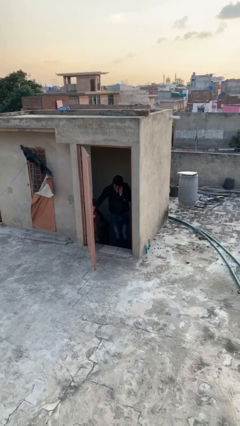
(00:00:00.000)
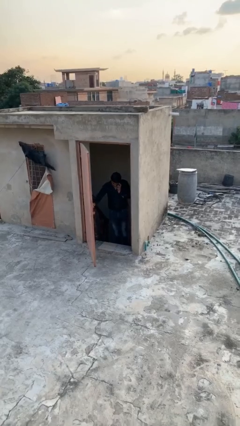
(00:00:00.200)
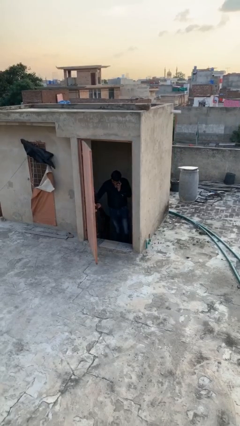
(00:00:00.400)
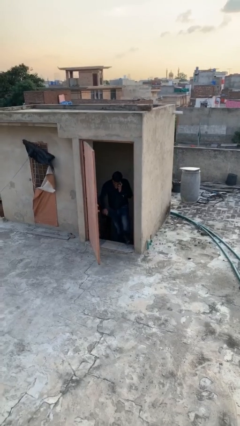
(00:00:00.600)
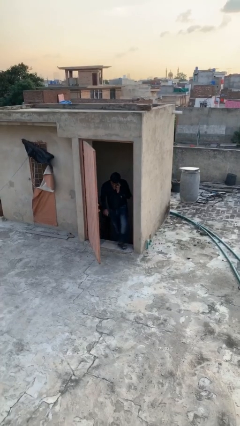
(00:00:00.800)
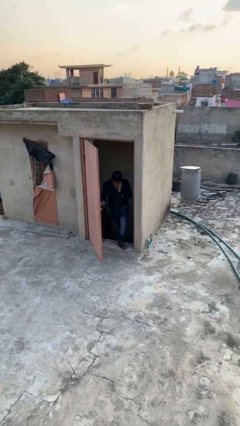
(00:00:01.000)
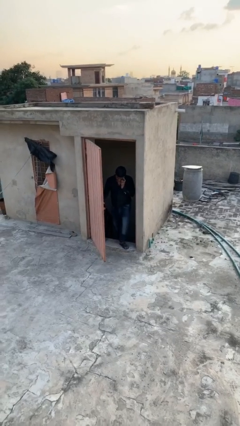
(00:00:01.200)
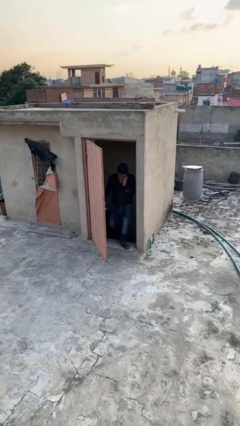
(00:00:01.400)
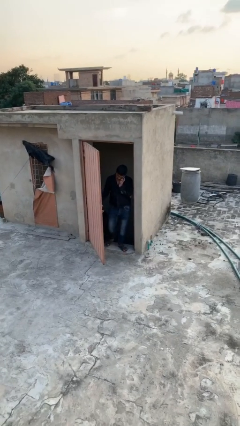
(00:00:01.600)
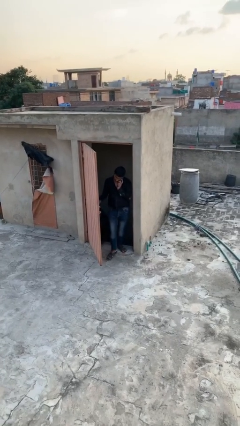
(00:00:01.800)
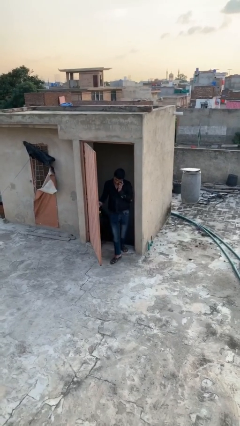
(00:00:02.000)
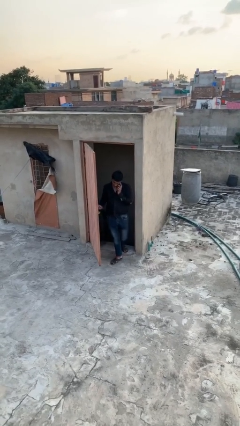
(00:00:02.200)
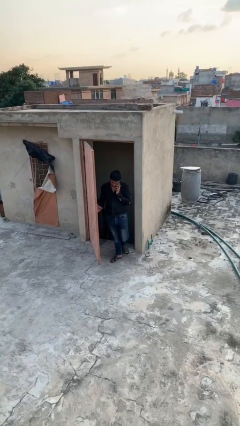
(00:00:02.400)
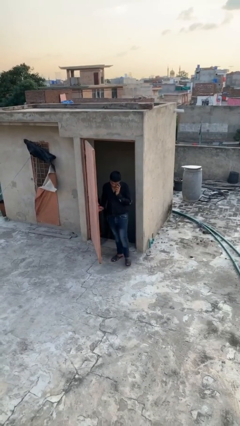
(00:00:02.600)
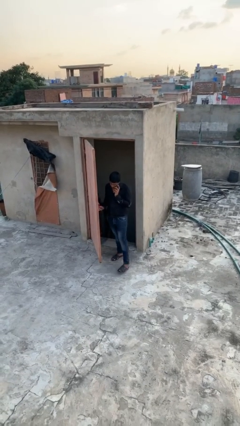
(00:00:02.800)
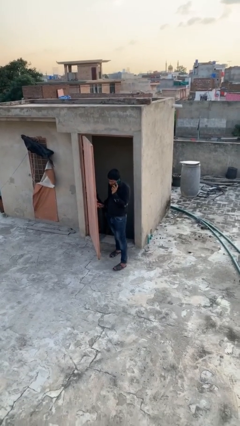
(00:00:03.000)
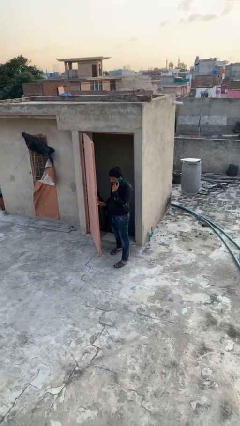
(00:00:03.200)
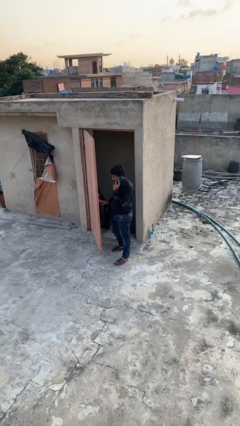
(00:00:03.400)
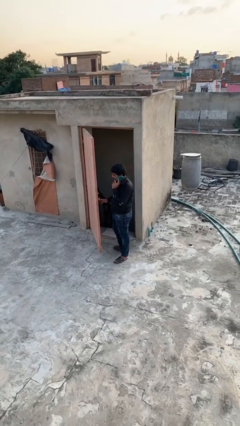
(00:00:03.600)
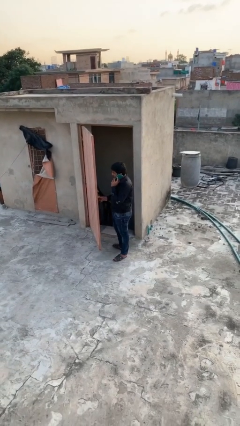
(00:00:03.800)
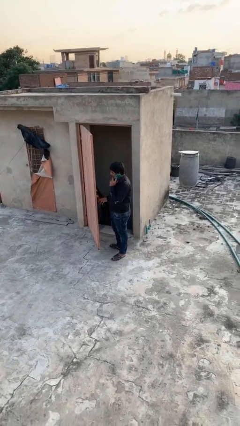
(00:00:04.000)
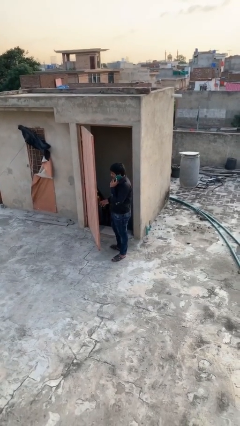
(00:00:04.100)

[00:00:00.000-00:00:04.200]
person enters scene through structure

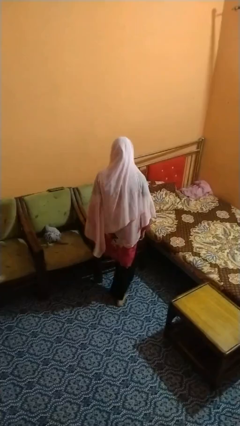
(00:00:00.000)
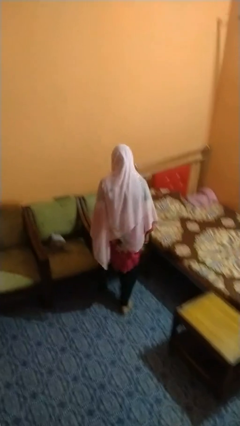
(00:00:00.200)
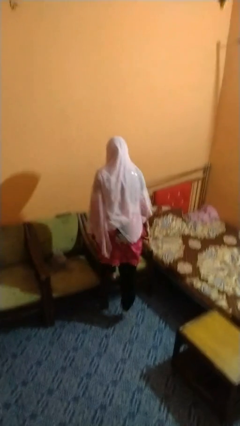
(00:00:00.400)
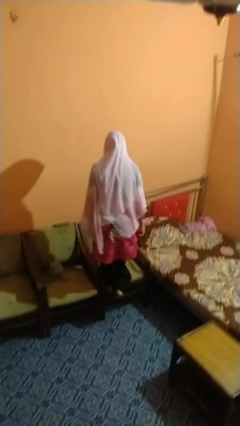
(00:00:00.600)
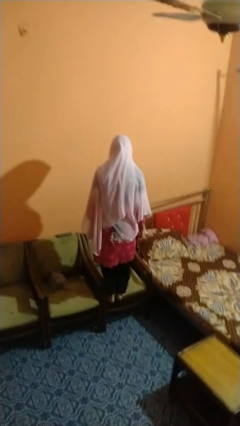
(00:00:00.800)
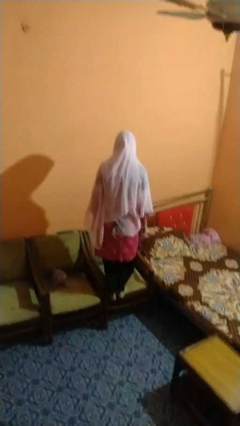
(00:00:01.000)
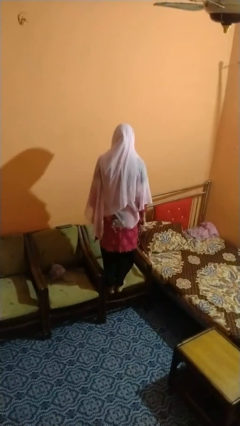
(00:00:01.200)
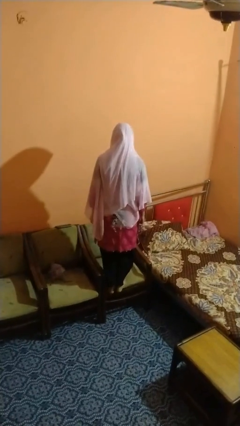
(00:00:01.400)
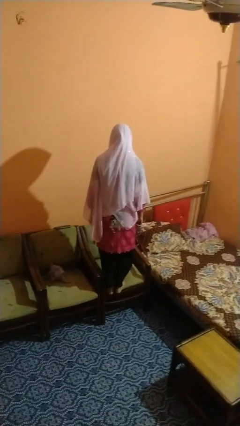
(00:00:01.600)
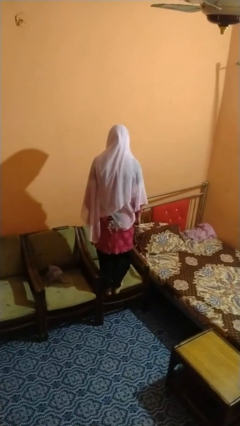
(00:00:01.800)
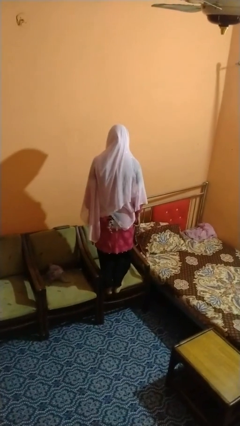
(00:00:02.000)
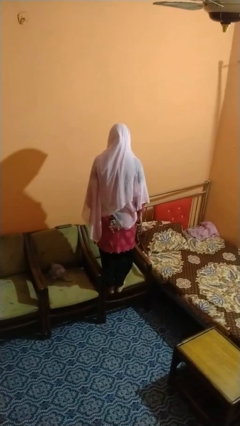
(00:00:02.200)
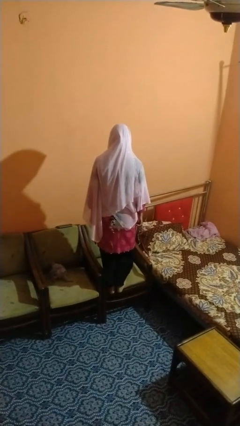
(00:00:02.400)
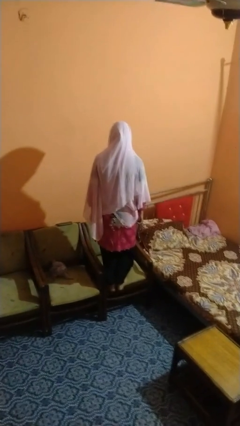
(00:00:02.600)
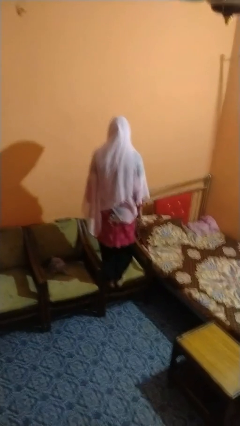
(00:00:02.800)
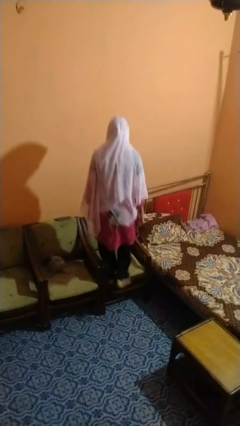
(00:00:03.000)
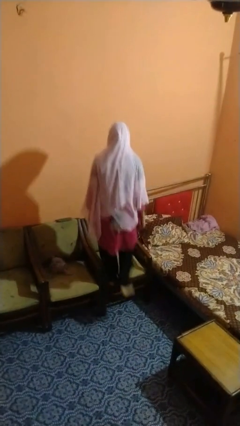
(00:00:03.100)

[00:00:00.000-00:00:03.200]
person climbs on chair

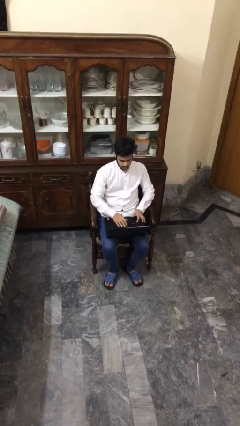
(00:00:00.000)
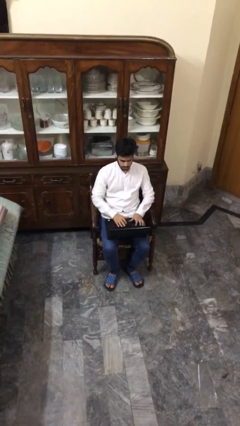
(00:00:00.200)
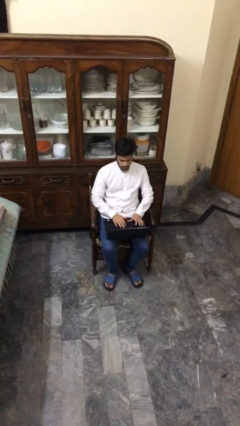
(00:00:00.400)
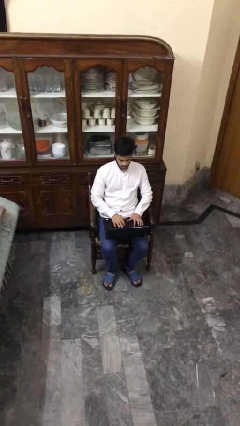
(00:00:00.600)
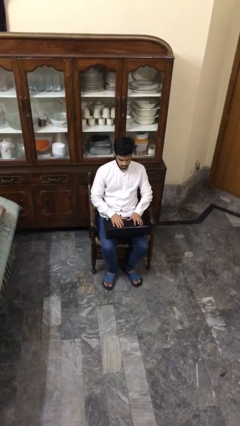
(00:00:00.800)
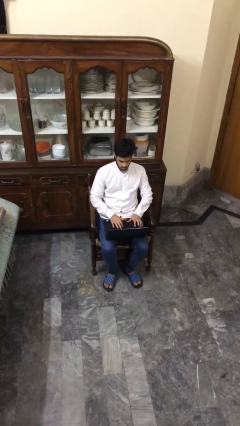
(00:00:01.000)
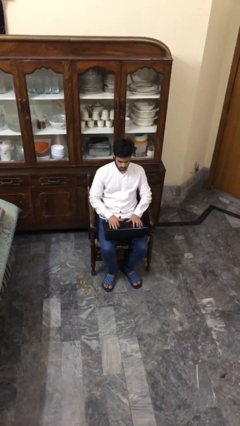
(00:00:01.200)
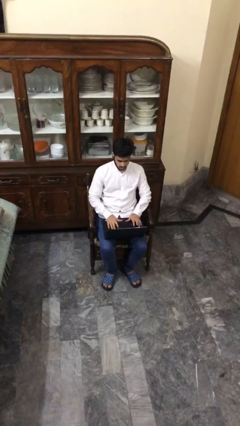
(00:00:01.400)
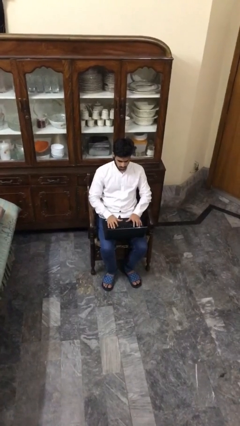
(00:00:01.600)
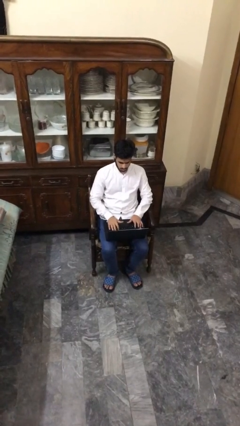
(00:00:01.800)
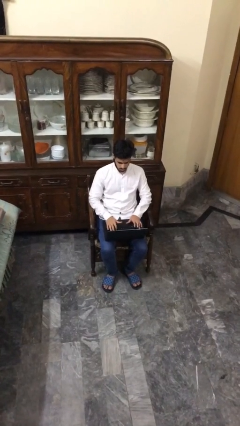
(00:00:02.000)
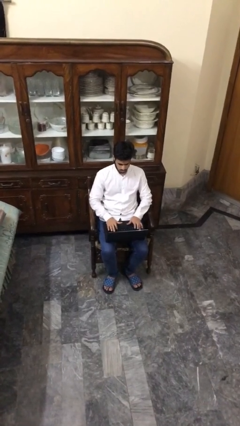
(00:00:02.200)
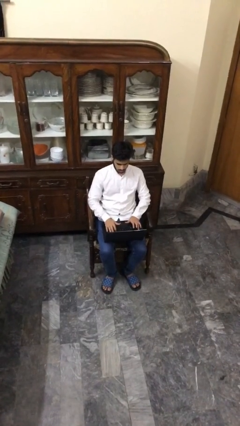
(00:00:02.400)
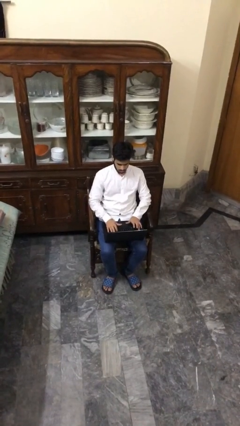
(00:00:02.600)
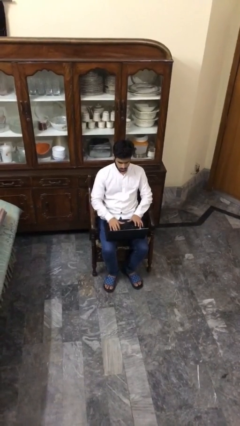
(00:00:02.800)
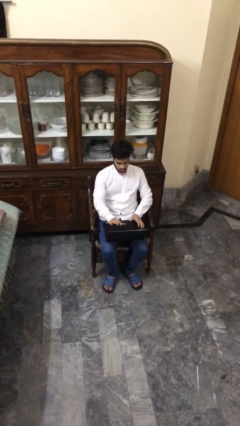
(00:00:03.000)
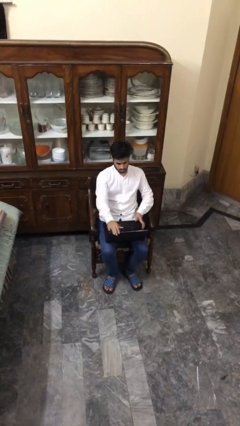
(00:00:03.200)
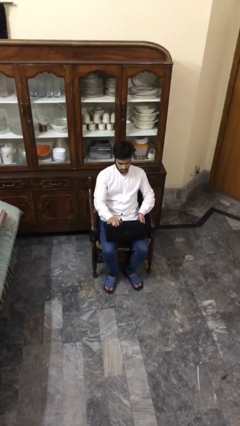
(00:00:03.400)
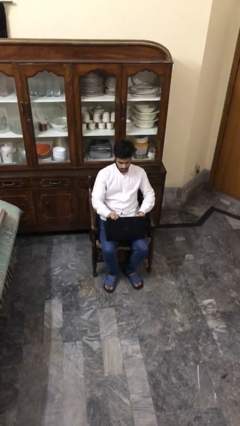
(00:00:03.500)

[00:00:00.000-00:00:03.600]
person interacts with laptop

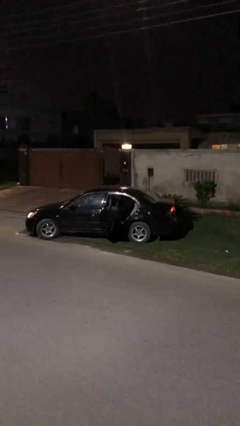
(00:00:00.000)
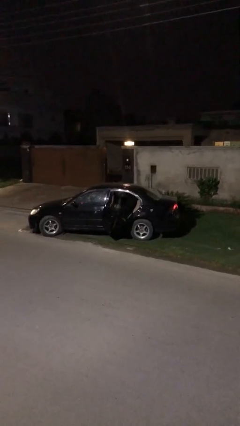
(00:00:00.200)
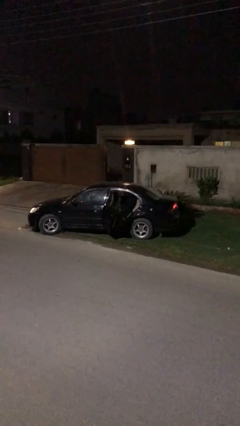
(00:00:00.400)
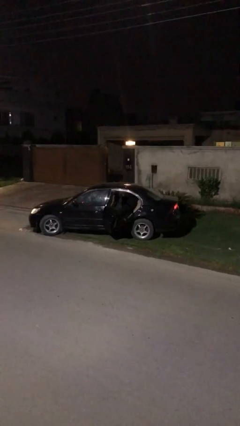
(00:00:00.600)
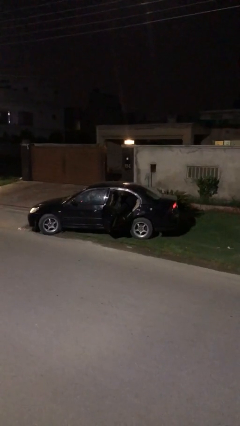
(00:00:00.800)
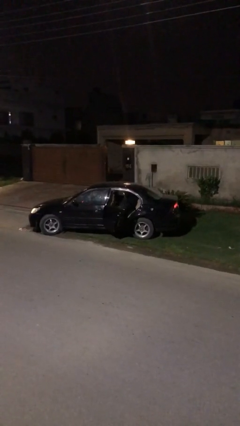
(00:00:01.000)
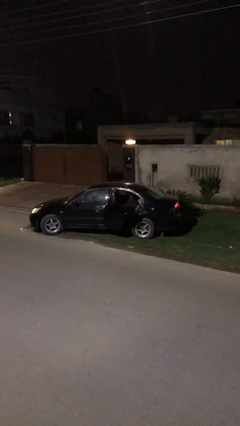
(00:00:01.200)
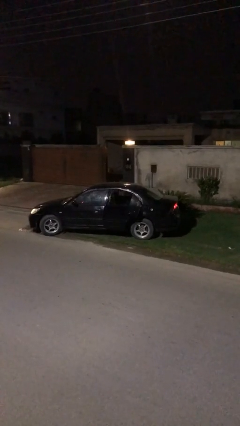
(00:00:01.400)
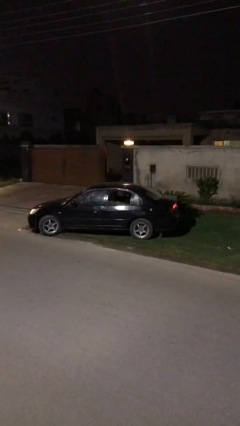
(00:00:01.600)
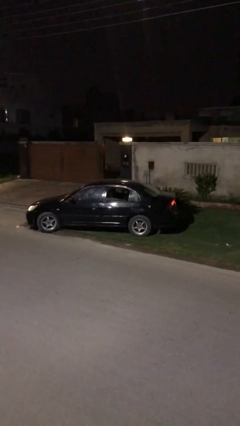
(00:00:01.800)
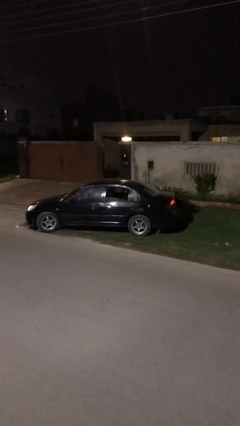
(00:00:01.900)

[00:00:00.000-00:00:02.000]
person closes car door

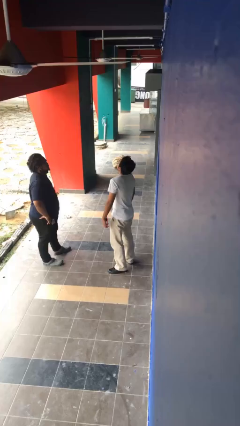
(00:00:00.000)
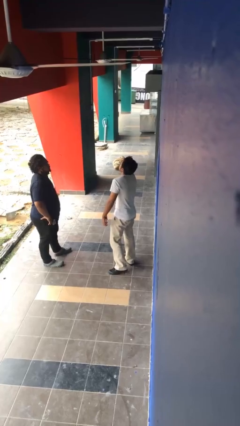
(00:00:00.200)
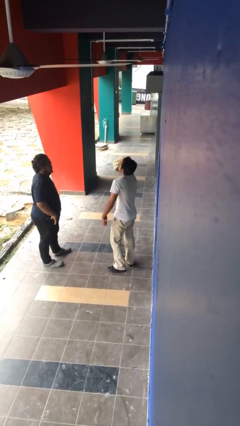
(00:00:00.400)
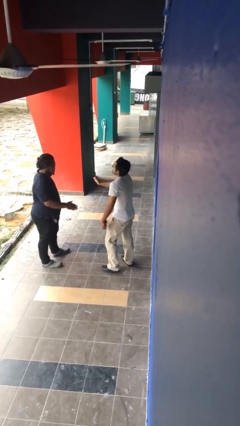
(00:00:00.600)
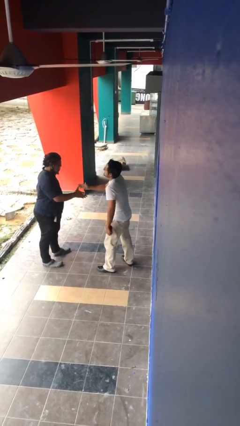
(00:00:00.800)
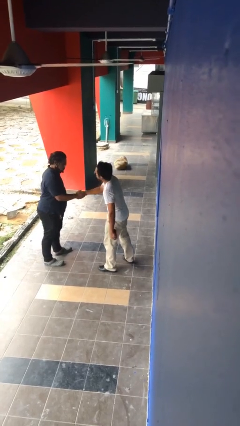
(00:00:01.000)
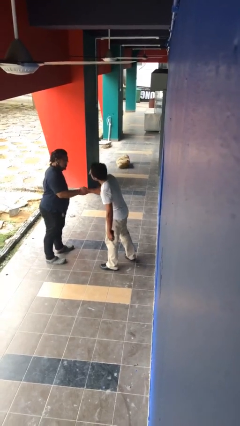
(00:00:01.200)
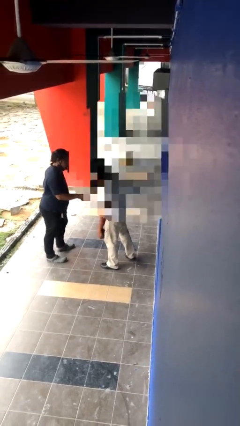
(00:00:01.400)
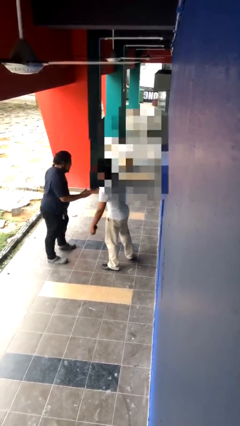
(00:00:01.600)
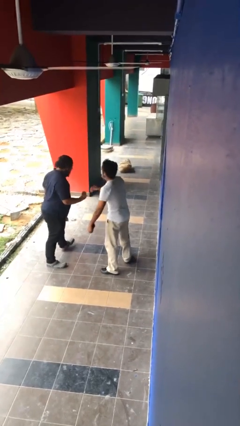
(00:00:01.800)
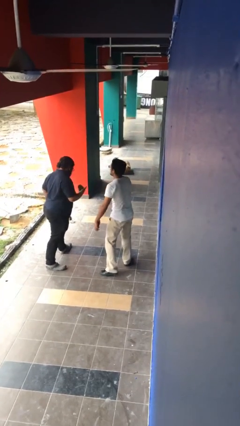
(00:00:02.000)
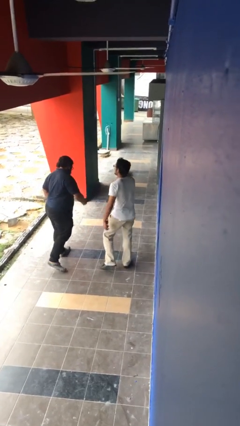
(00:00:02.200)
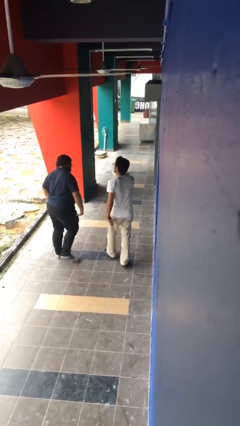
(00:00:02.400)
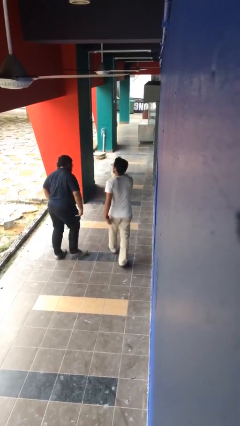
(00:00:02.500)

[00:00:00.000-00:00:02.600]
person shakes hand

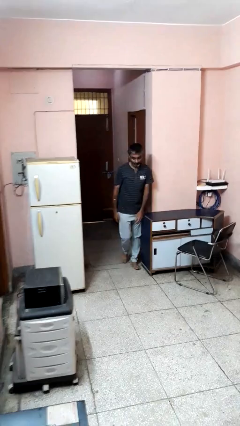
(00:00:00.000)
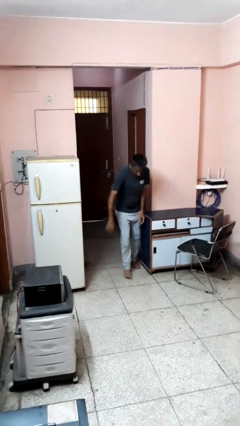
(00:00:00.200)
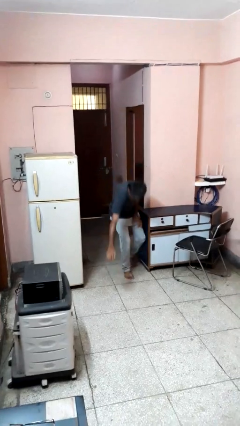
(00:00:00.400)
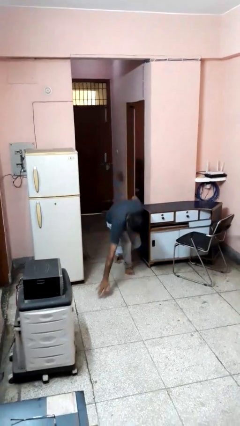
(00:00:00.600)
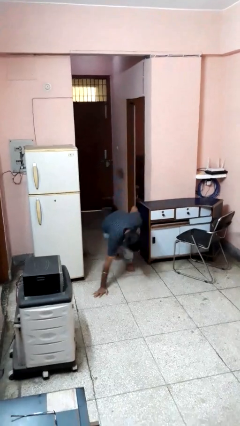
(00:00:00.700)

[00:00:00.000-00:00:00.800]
person trips on object on floor

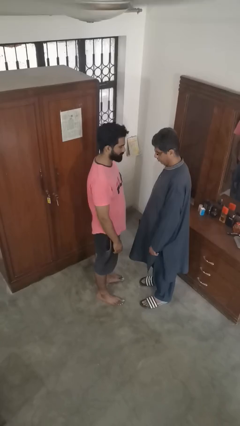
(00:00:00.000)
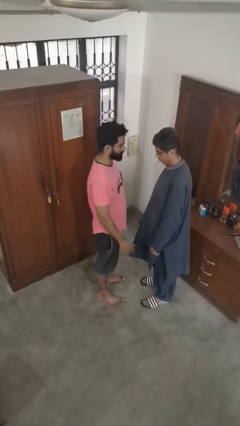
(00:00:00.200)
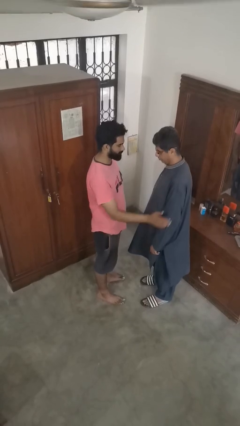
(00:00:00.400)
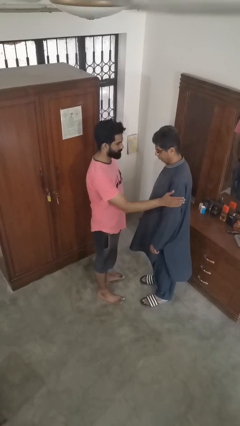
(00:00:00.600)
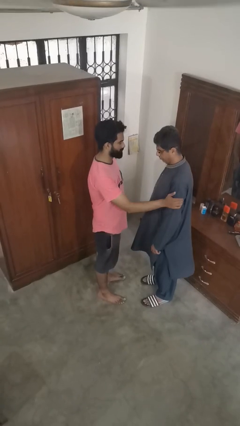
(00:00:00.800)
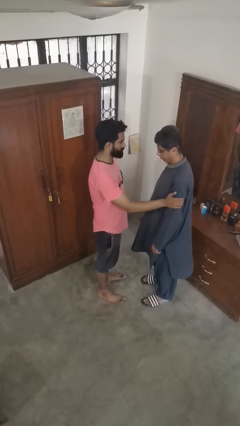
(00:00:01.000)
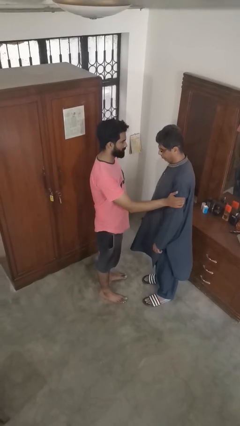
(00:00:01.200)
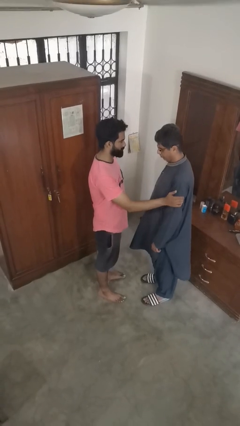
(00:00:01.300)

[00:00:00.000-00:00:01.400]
person grabs person by bicep
